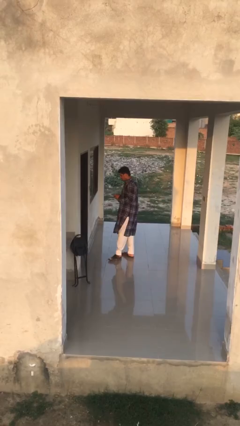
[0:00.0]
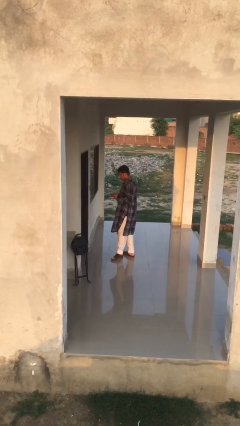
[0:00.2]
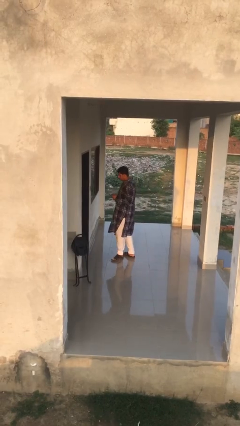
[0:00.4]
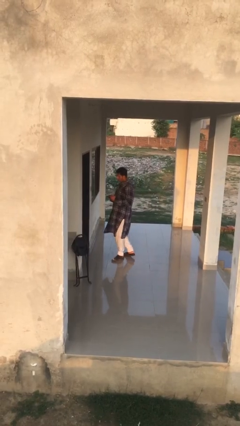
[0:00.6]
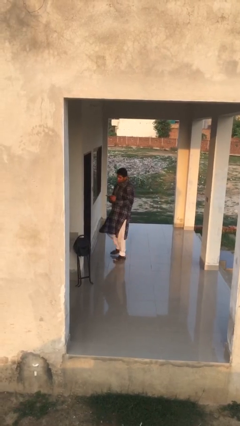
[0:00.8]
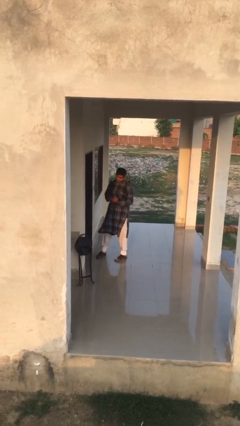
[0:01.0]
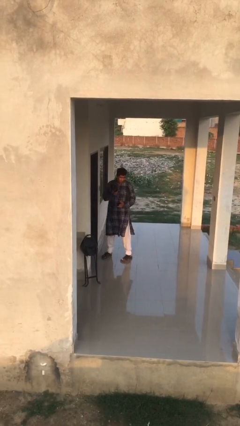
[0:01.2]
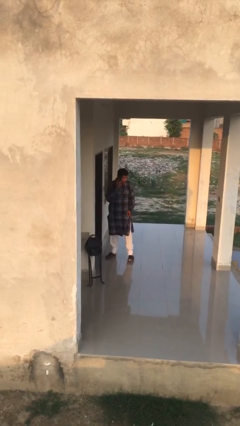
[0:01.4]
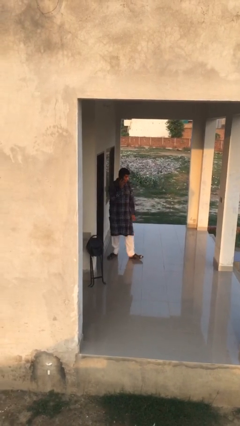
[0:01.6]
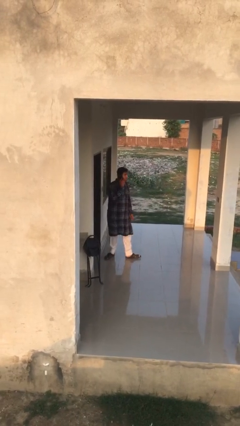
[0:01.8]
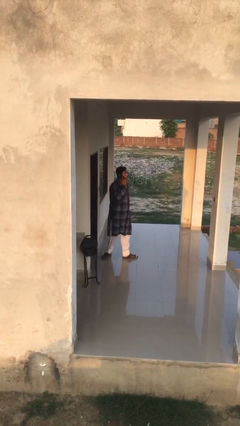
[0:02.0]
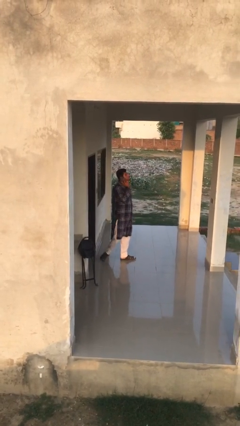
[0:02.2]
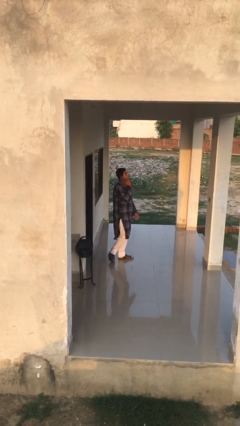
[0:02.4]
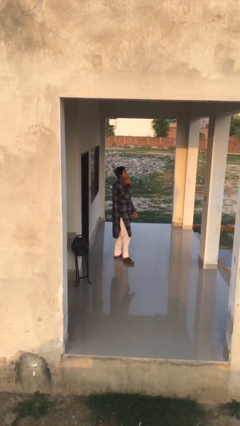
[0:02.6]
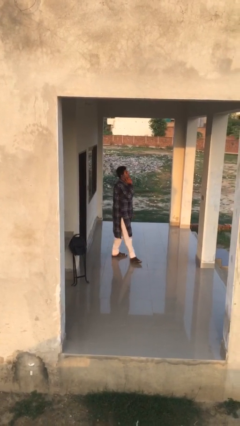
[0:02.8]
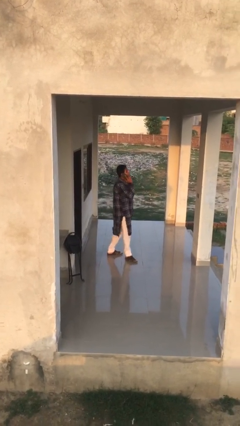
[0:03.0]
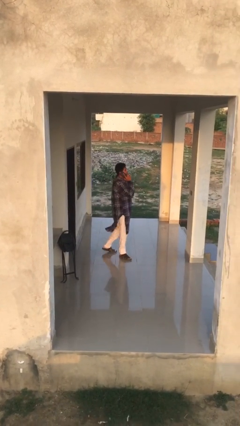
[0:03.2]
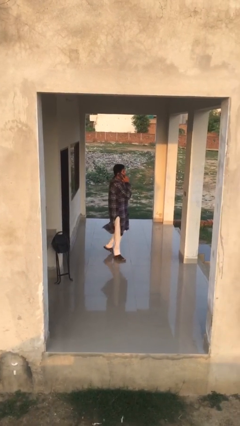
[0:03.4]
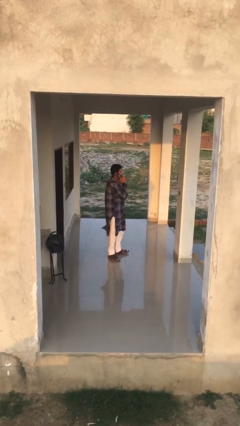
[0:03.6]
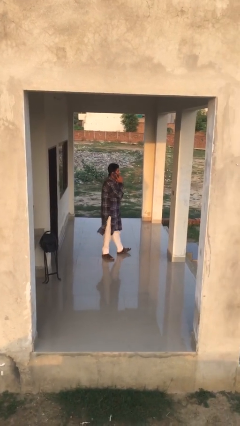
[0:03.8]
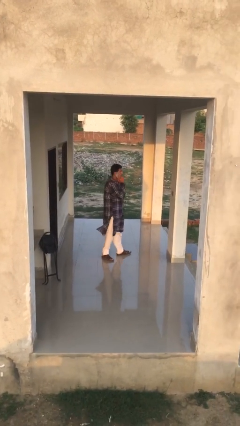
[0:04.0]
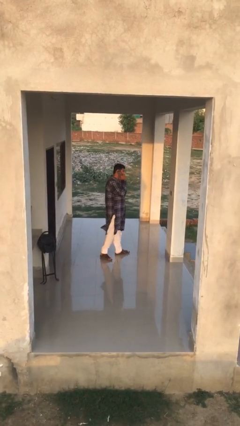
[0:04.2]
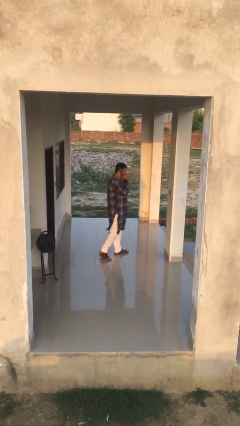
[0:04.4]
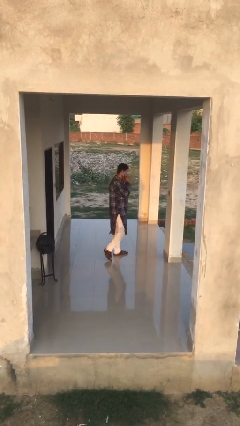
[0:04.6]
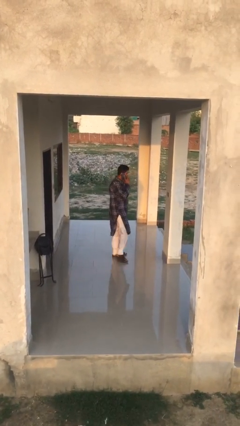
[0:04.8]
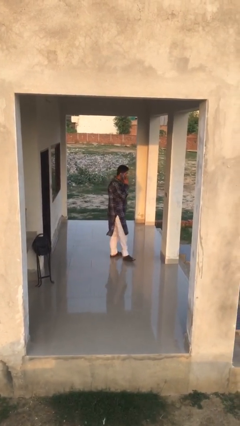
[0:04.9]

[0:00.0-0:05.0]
person talks on phone

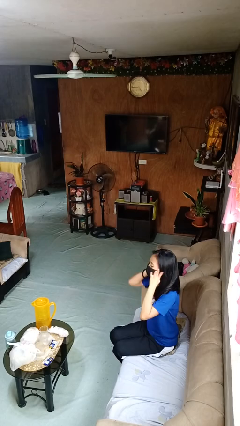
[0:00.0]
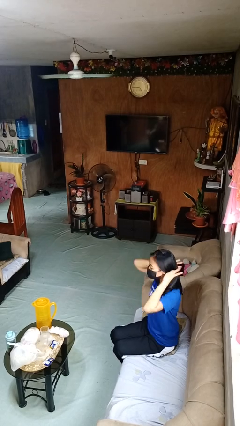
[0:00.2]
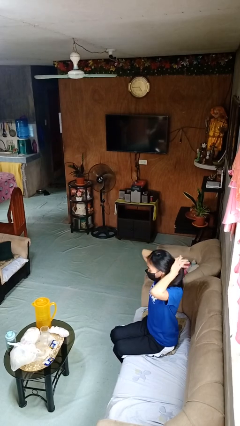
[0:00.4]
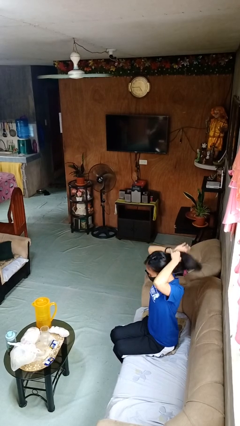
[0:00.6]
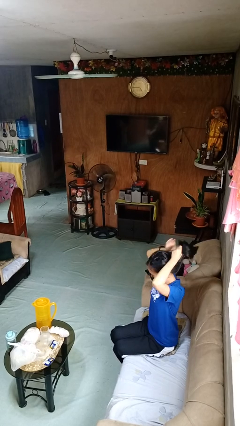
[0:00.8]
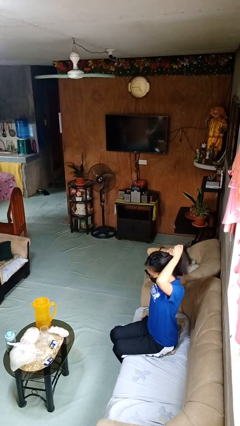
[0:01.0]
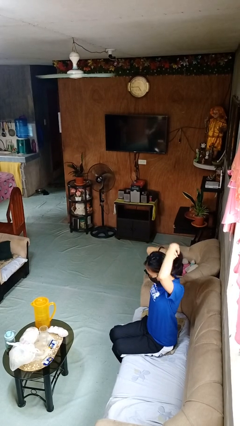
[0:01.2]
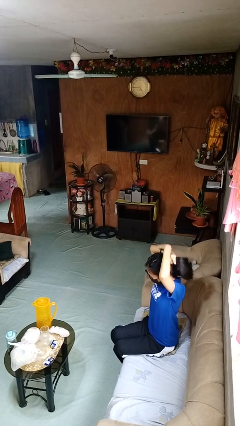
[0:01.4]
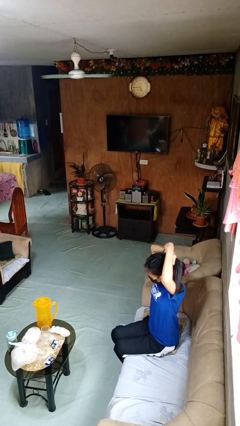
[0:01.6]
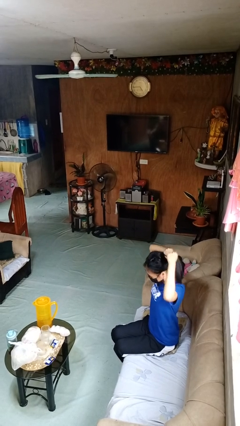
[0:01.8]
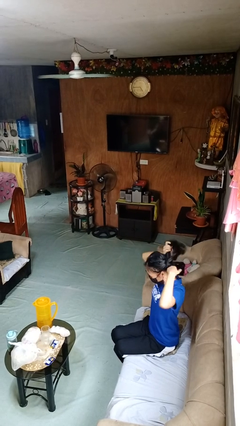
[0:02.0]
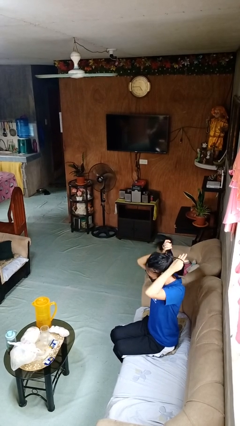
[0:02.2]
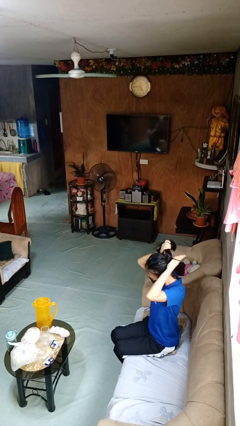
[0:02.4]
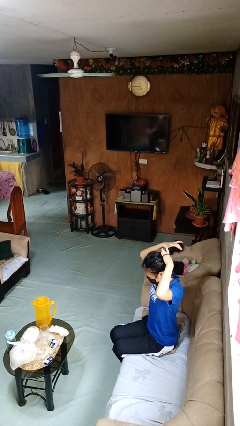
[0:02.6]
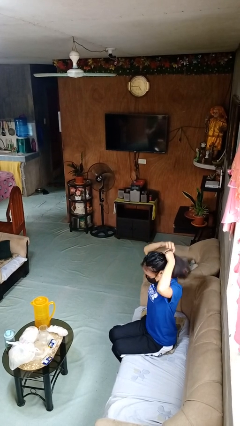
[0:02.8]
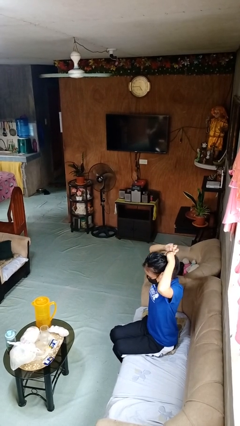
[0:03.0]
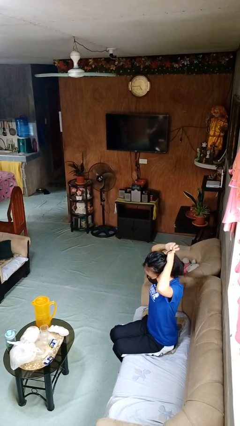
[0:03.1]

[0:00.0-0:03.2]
person puts hair in ponytail

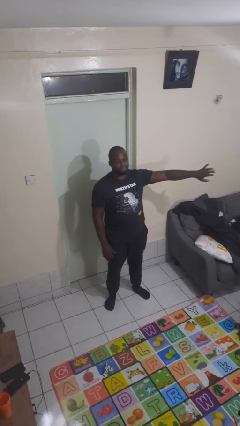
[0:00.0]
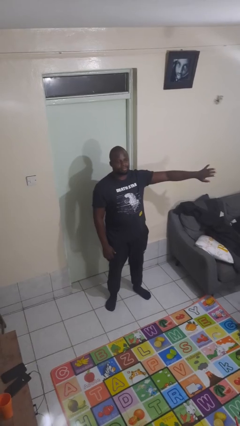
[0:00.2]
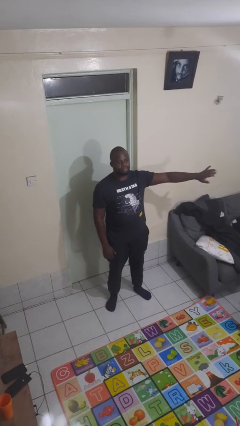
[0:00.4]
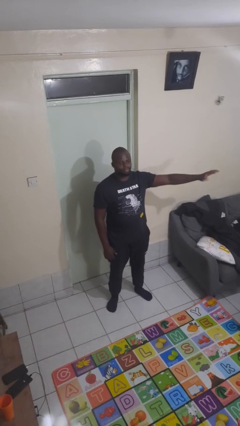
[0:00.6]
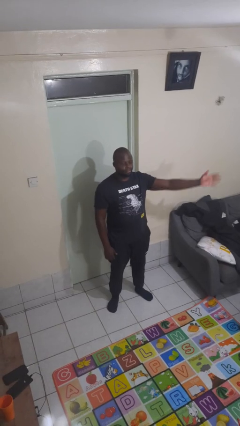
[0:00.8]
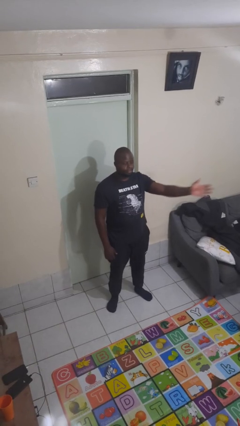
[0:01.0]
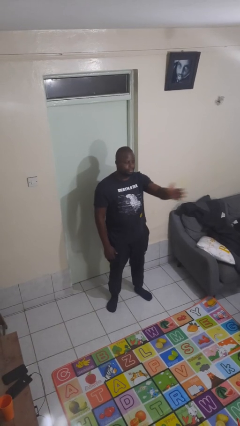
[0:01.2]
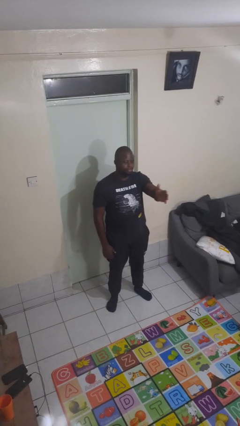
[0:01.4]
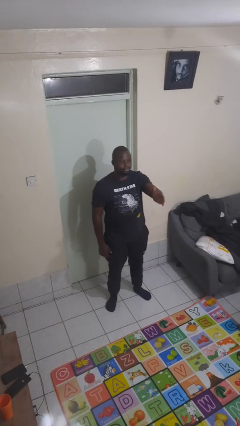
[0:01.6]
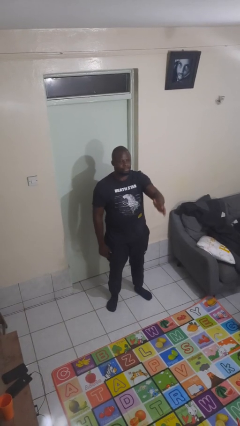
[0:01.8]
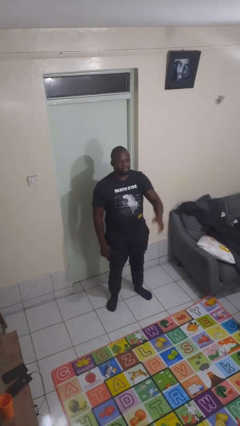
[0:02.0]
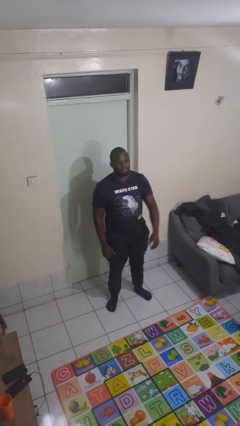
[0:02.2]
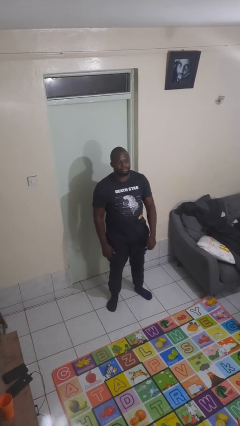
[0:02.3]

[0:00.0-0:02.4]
person gestures swipe right

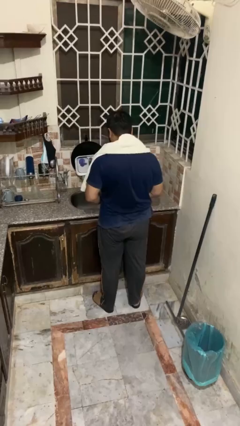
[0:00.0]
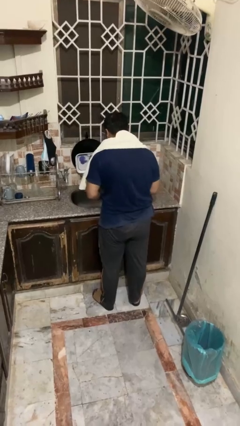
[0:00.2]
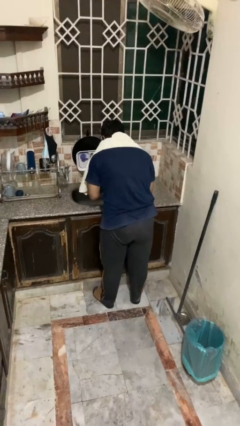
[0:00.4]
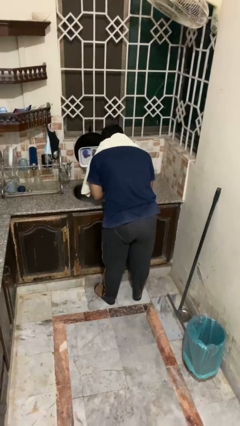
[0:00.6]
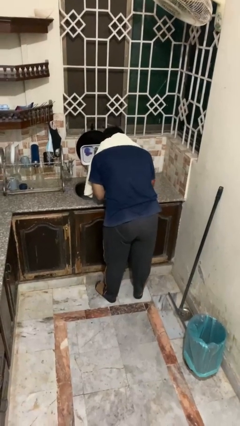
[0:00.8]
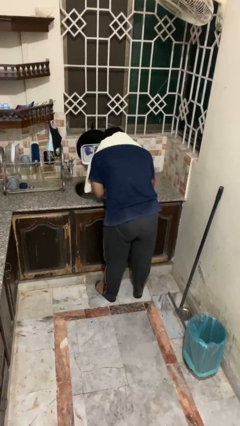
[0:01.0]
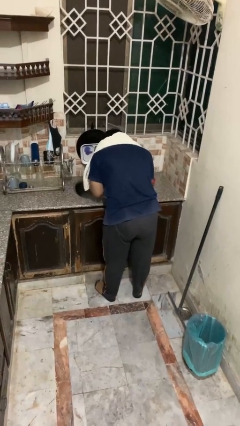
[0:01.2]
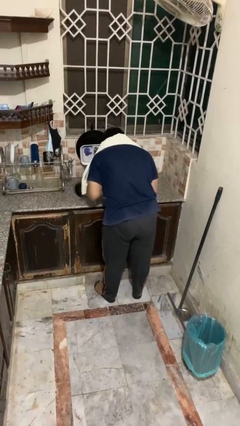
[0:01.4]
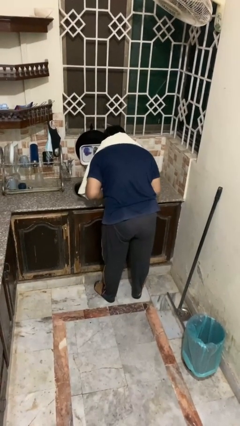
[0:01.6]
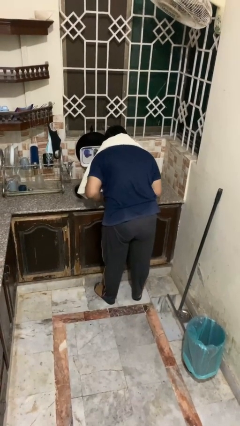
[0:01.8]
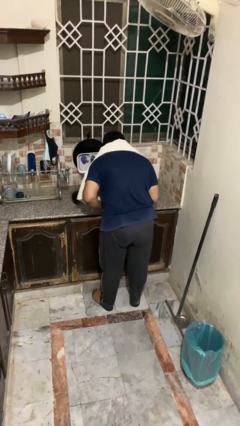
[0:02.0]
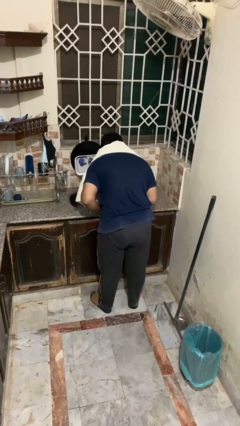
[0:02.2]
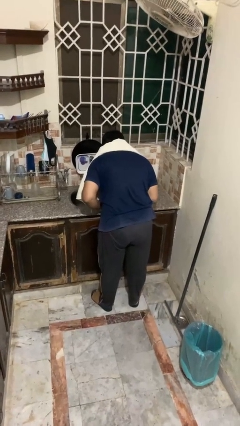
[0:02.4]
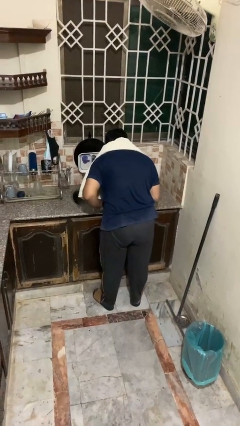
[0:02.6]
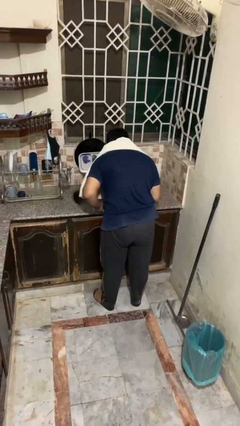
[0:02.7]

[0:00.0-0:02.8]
person washes face

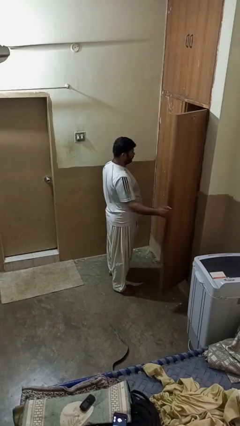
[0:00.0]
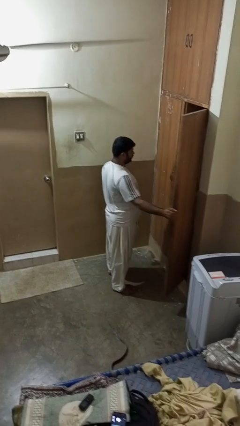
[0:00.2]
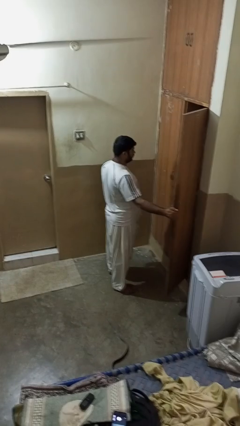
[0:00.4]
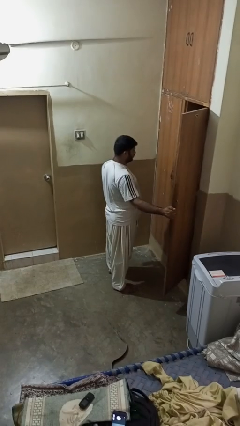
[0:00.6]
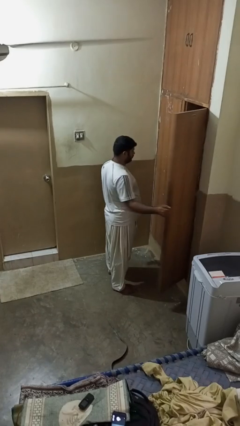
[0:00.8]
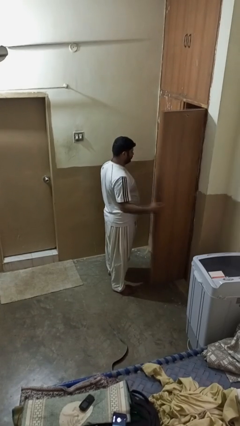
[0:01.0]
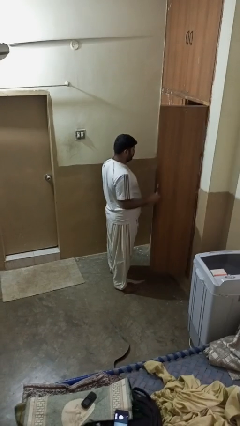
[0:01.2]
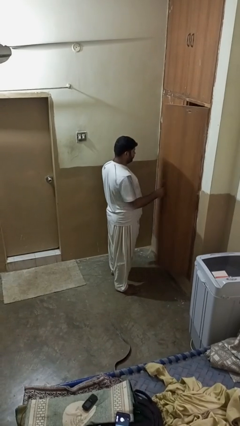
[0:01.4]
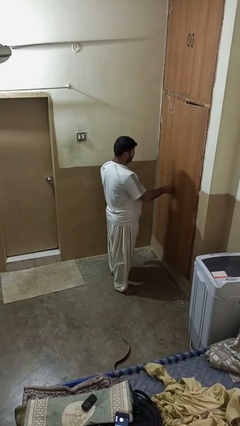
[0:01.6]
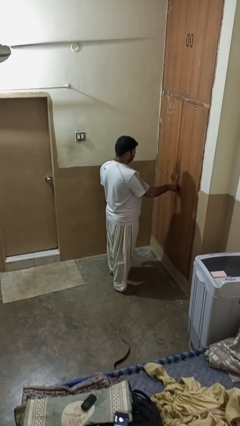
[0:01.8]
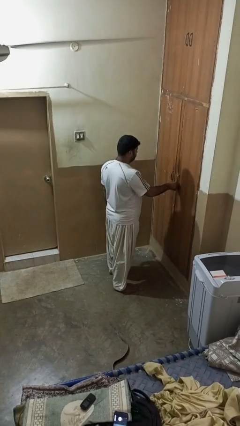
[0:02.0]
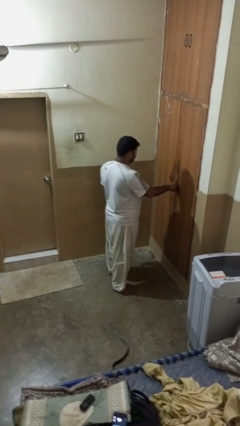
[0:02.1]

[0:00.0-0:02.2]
person closes closet door

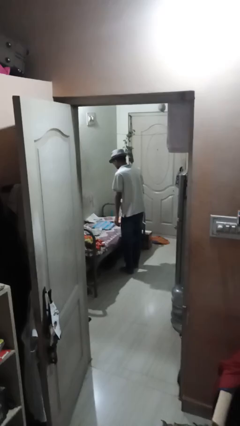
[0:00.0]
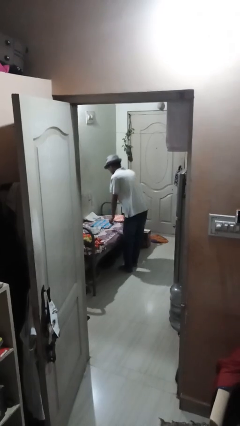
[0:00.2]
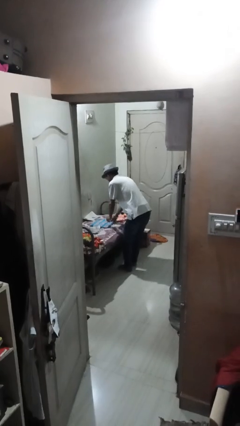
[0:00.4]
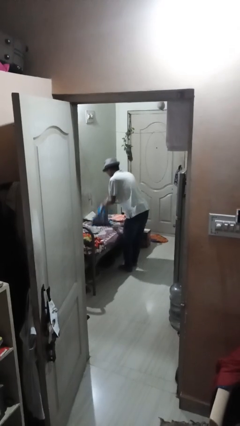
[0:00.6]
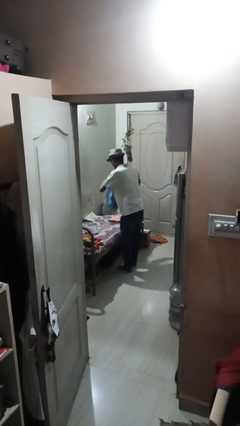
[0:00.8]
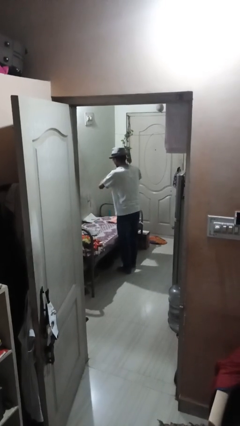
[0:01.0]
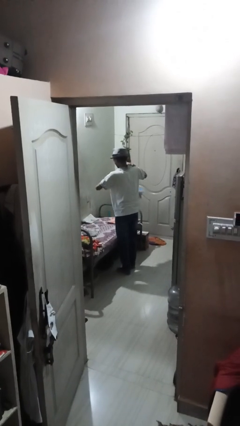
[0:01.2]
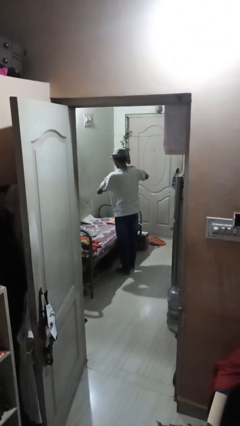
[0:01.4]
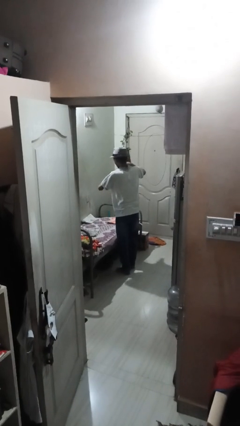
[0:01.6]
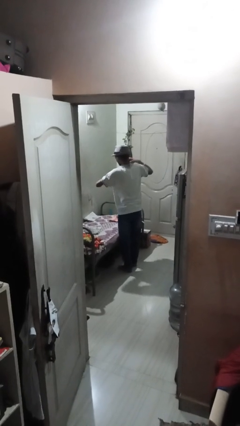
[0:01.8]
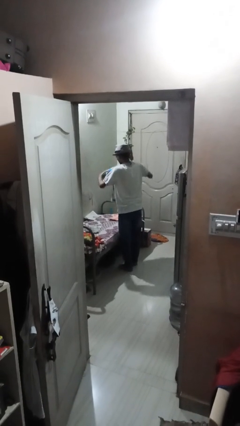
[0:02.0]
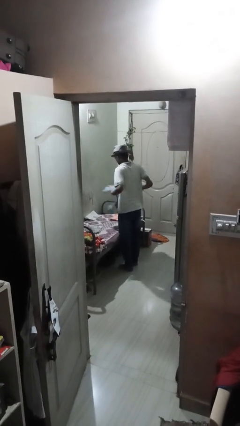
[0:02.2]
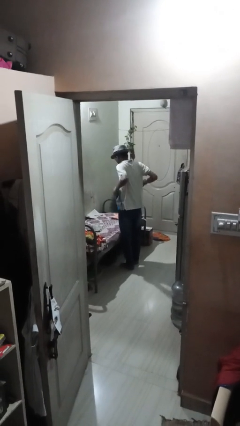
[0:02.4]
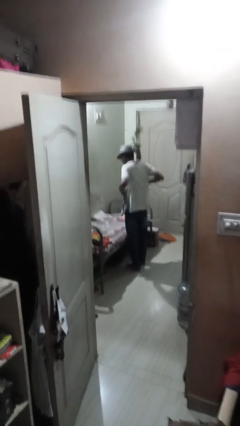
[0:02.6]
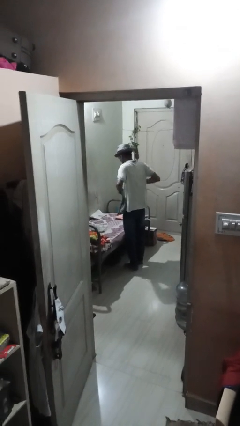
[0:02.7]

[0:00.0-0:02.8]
person folds towel
